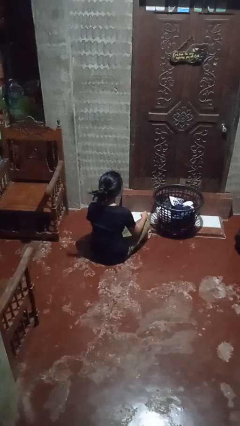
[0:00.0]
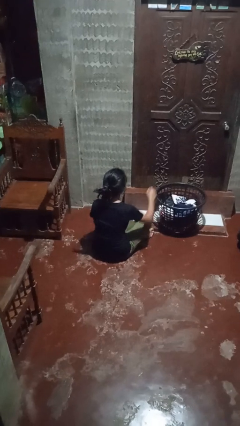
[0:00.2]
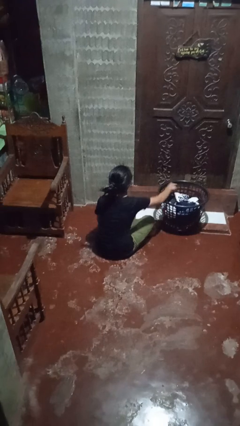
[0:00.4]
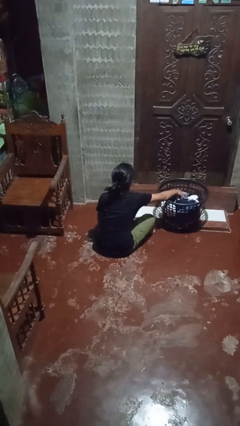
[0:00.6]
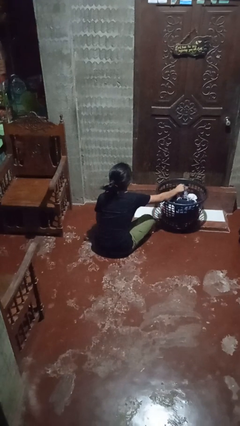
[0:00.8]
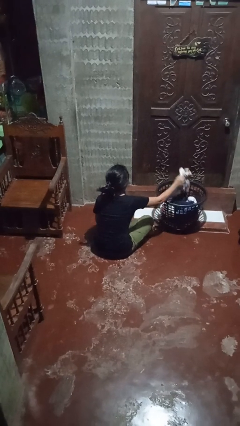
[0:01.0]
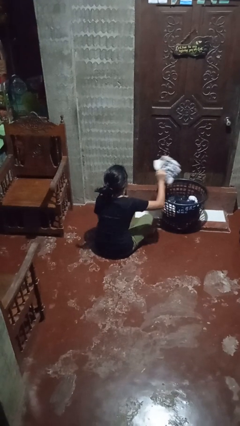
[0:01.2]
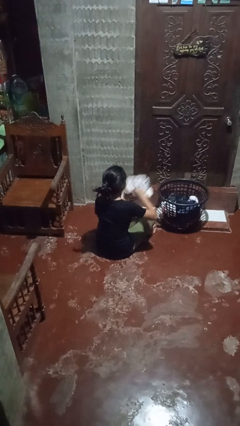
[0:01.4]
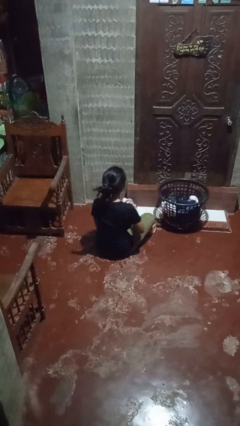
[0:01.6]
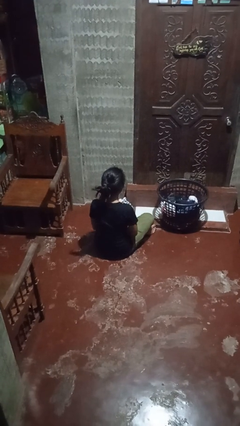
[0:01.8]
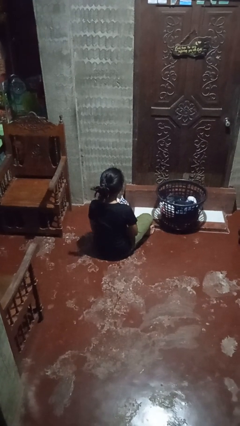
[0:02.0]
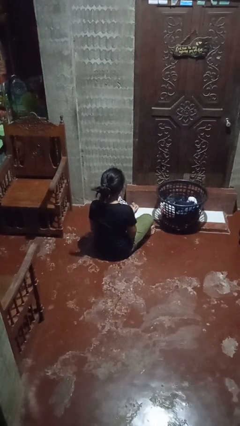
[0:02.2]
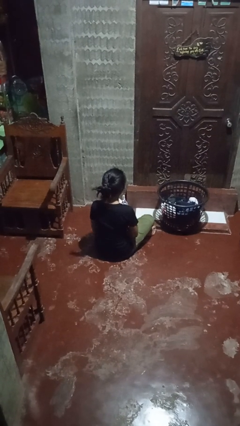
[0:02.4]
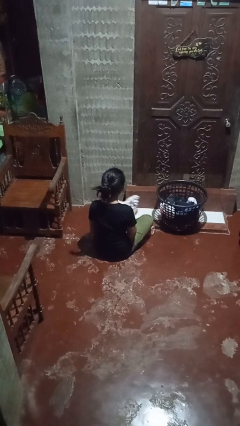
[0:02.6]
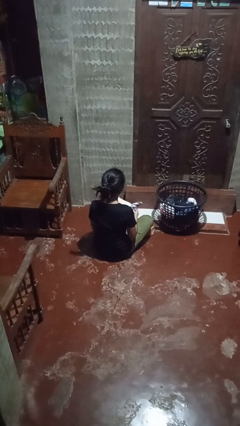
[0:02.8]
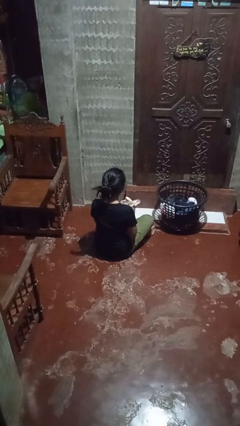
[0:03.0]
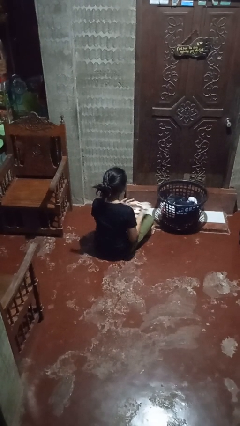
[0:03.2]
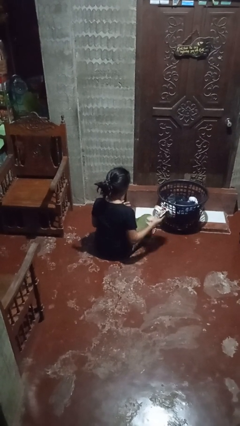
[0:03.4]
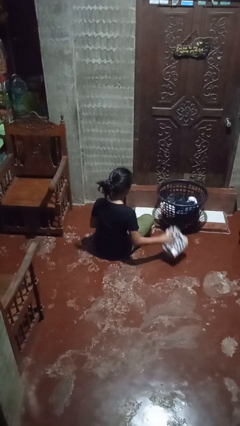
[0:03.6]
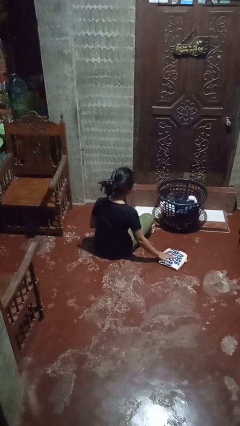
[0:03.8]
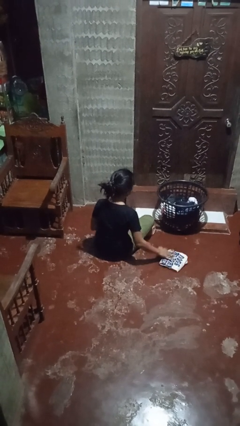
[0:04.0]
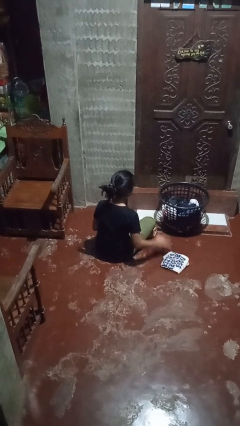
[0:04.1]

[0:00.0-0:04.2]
person folds shirt

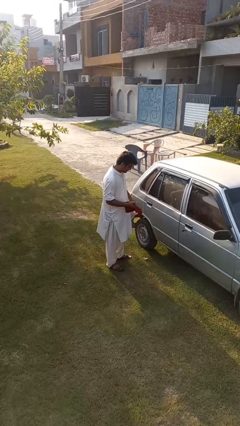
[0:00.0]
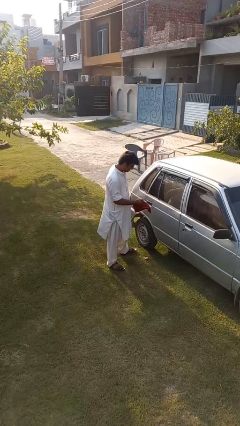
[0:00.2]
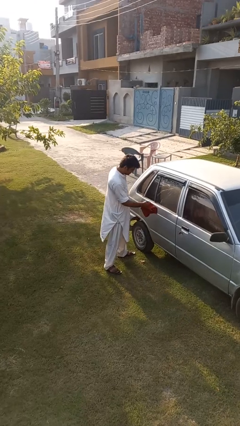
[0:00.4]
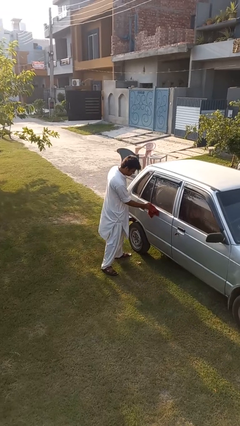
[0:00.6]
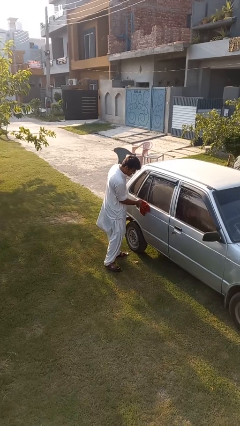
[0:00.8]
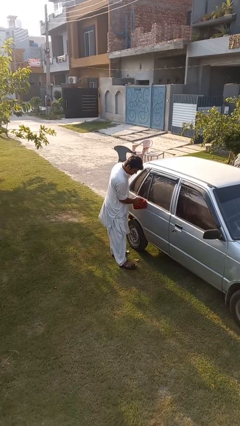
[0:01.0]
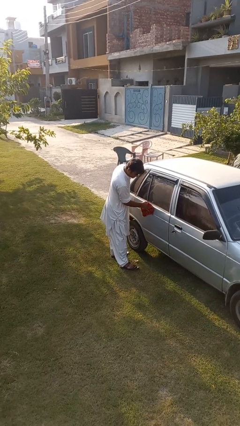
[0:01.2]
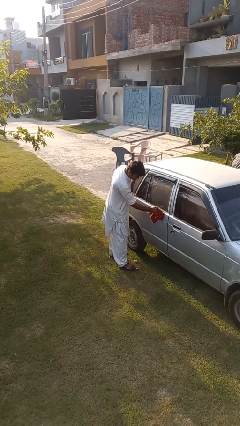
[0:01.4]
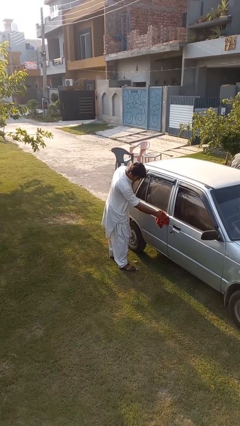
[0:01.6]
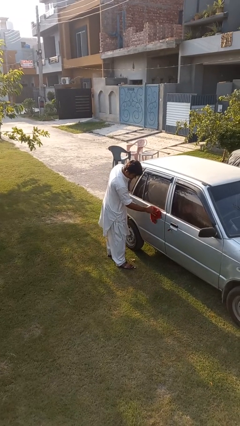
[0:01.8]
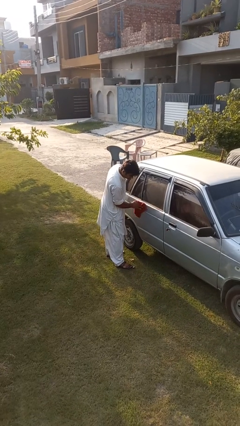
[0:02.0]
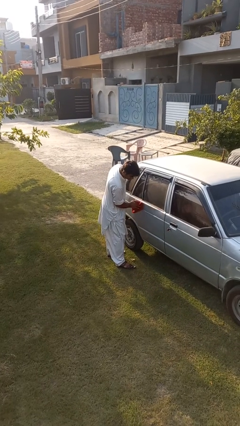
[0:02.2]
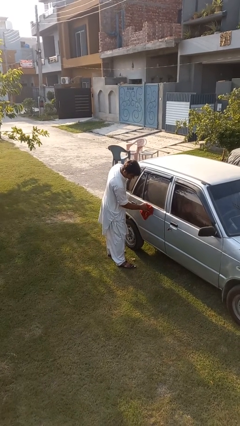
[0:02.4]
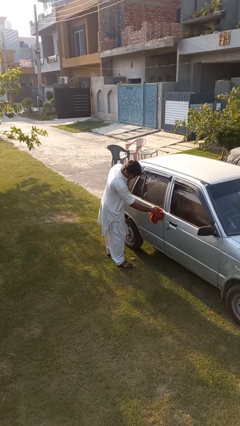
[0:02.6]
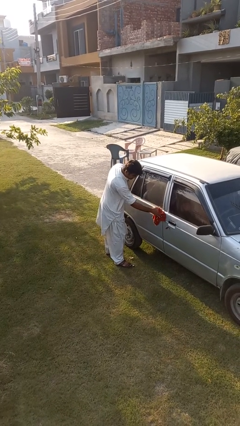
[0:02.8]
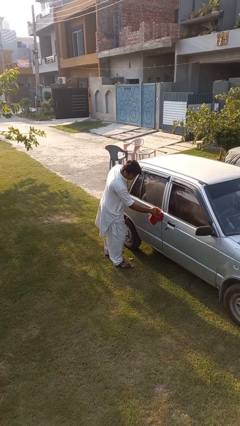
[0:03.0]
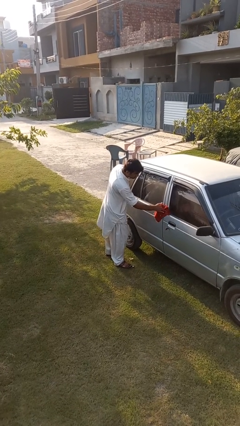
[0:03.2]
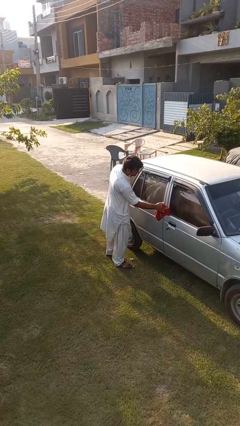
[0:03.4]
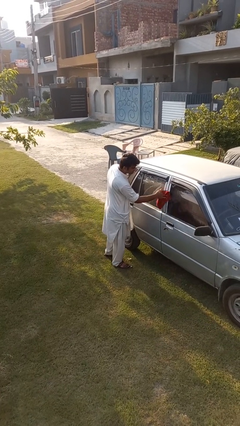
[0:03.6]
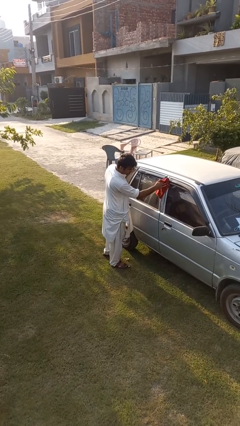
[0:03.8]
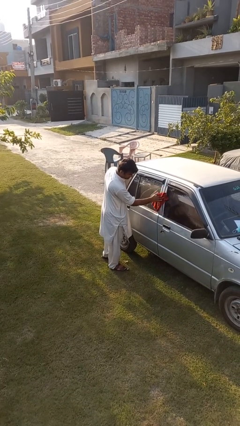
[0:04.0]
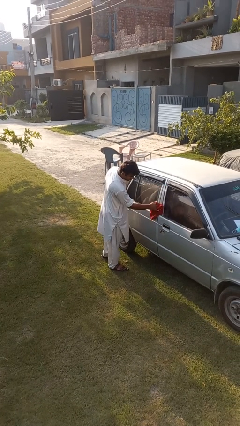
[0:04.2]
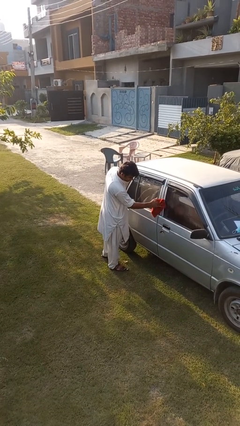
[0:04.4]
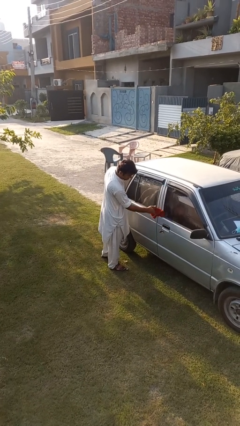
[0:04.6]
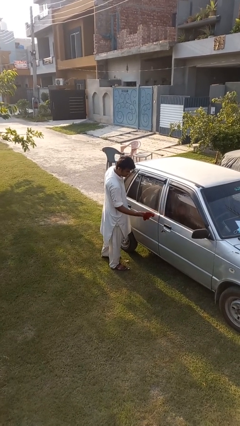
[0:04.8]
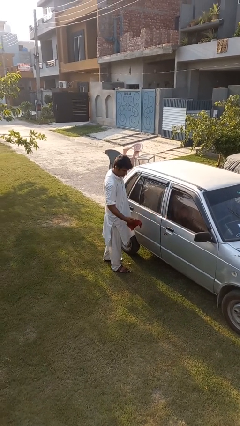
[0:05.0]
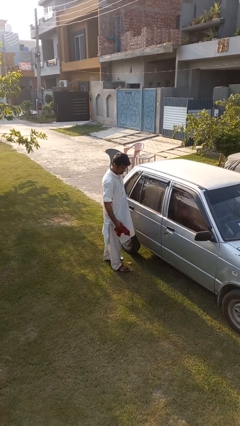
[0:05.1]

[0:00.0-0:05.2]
person polishes car with rag

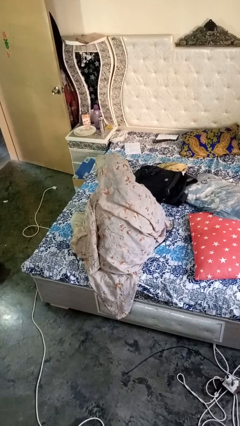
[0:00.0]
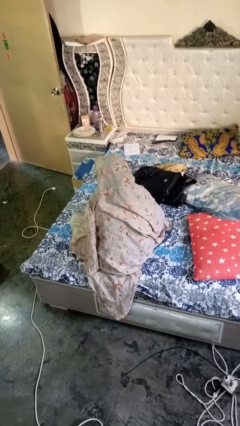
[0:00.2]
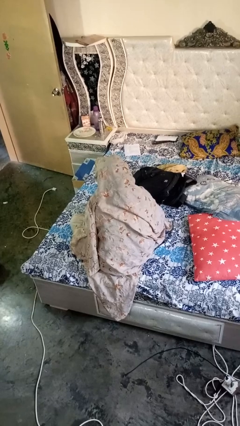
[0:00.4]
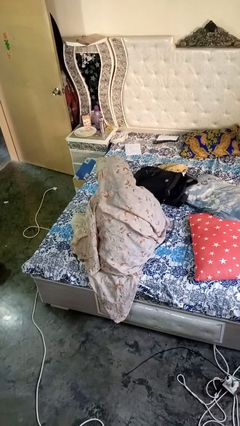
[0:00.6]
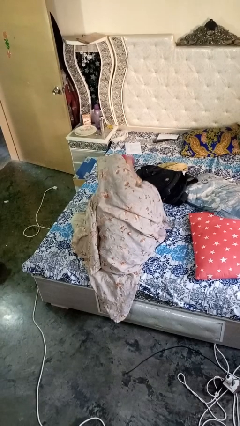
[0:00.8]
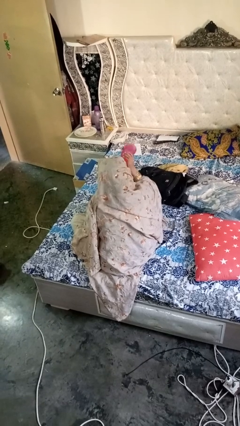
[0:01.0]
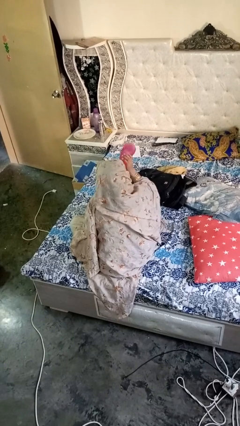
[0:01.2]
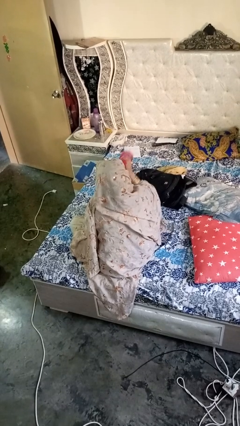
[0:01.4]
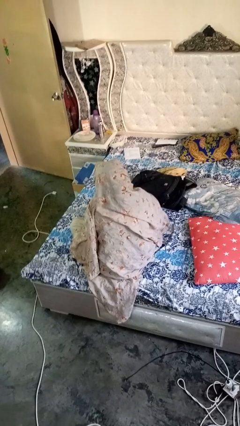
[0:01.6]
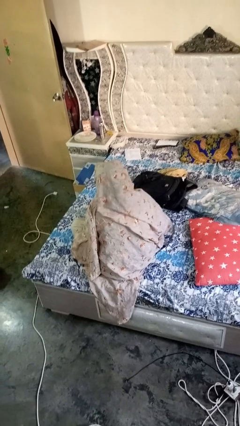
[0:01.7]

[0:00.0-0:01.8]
person drinks from bottle

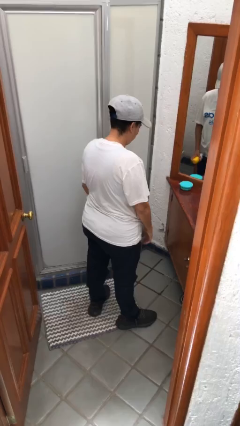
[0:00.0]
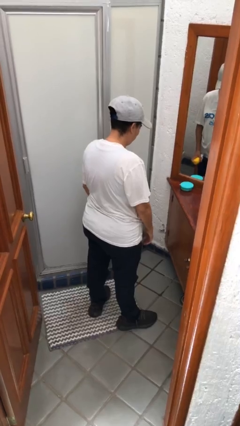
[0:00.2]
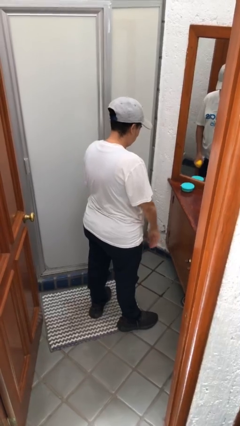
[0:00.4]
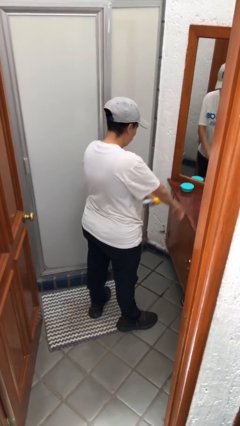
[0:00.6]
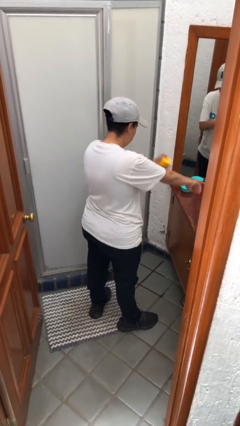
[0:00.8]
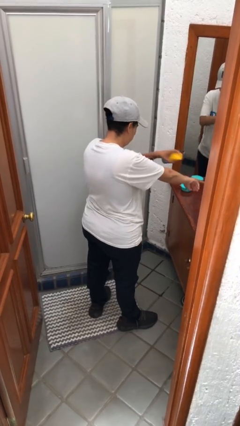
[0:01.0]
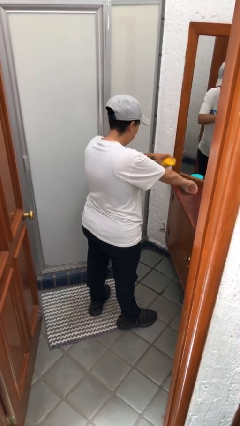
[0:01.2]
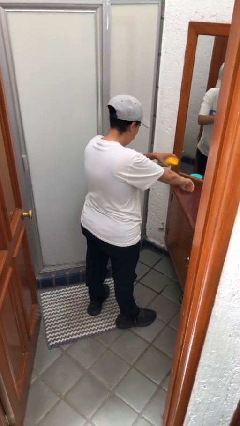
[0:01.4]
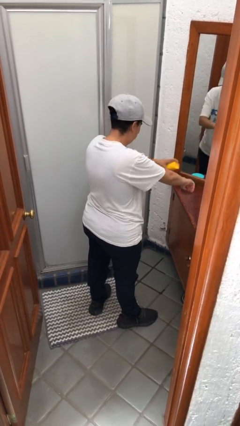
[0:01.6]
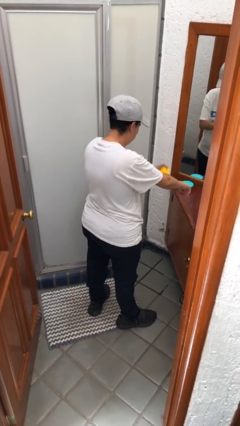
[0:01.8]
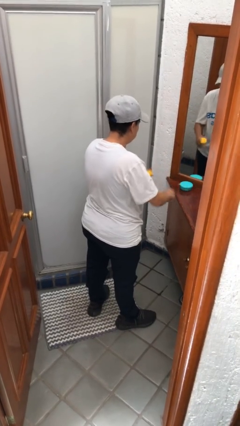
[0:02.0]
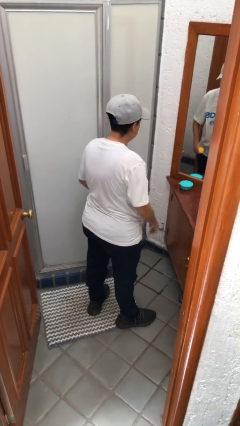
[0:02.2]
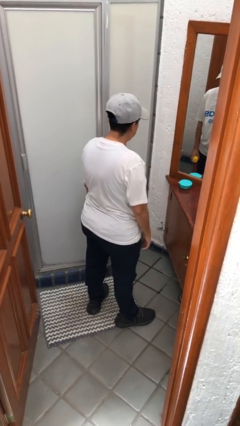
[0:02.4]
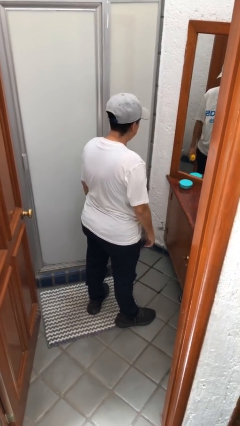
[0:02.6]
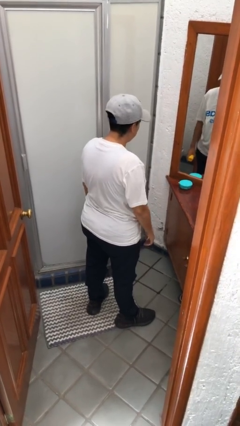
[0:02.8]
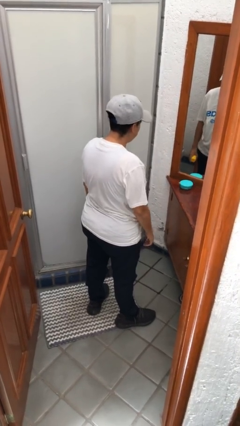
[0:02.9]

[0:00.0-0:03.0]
person applies sunscreen

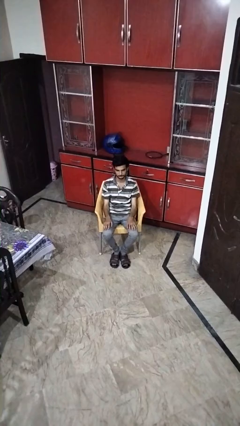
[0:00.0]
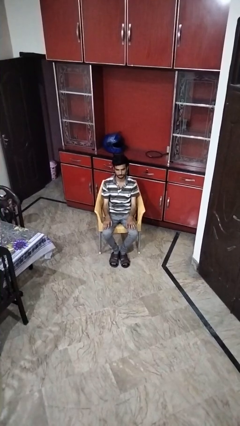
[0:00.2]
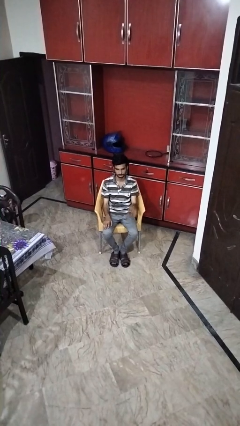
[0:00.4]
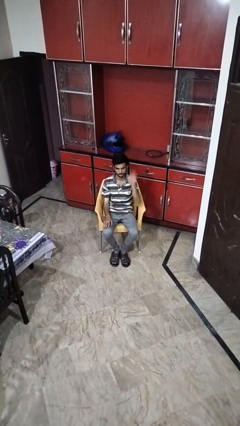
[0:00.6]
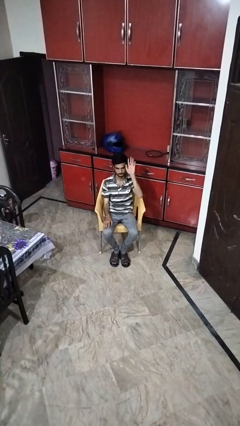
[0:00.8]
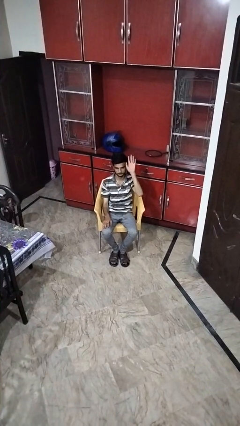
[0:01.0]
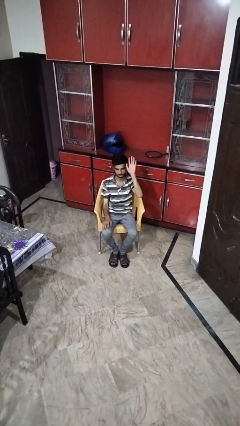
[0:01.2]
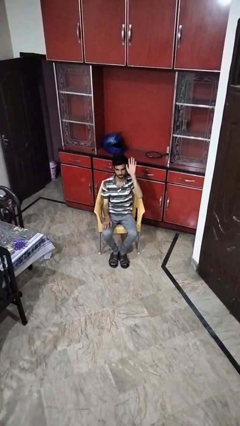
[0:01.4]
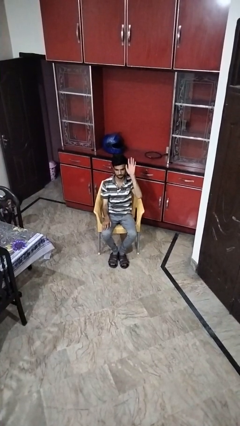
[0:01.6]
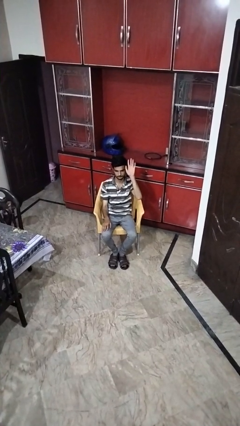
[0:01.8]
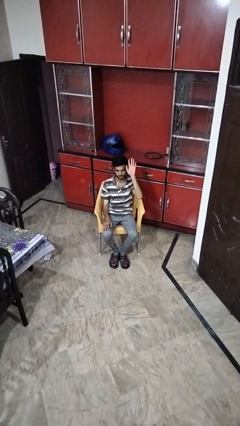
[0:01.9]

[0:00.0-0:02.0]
person gestures raise hand

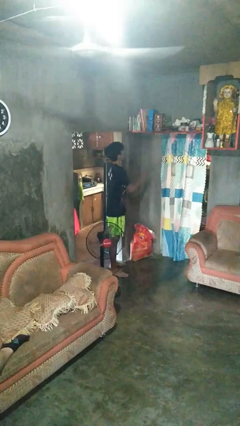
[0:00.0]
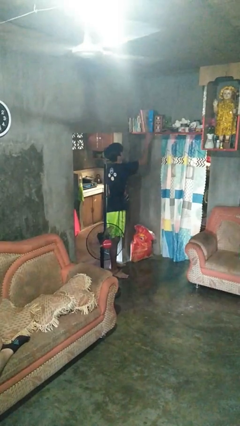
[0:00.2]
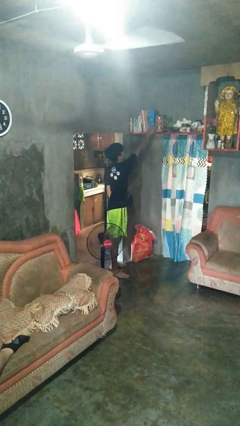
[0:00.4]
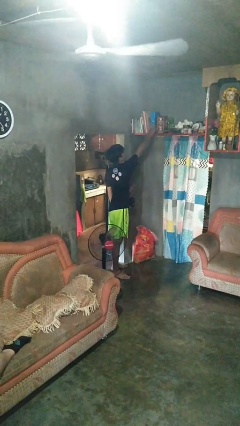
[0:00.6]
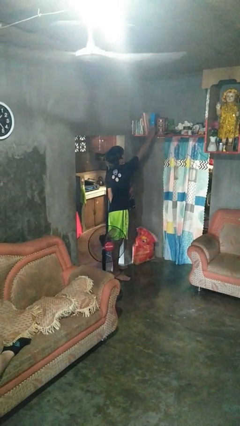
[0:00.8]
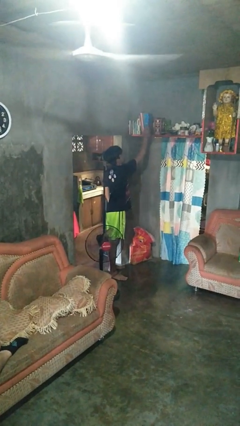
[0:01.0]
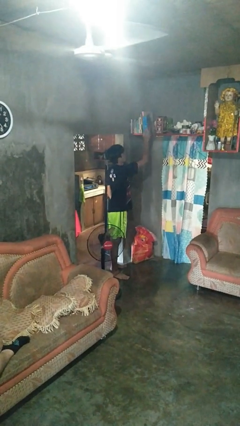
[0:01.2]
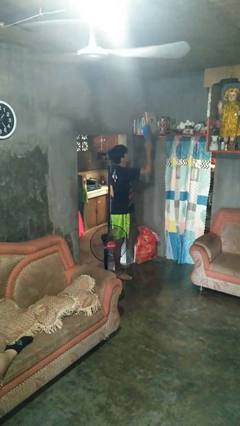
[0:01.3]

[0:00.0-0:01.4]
person picks up object from shelf
